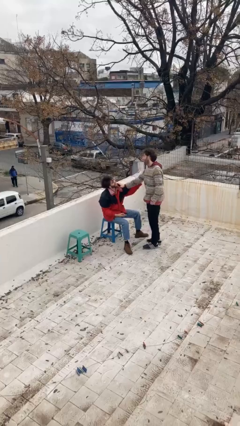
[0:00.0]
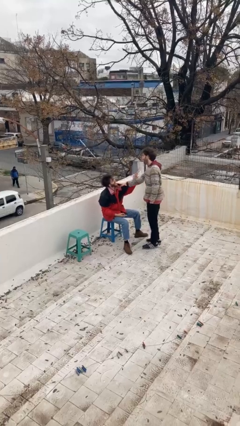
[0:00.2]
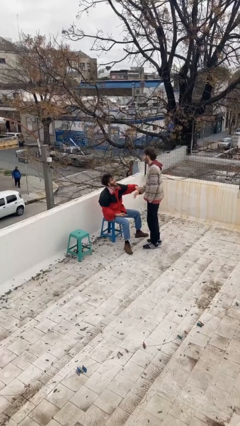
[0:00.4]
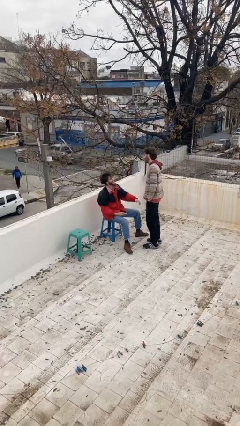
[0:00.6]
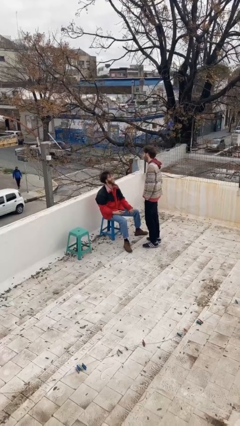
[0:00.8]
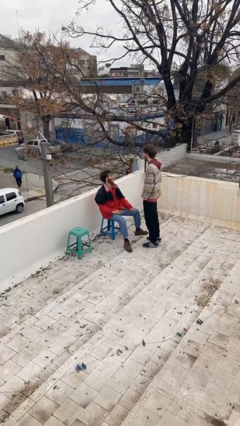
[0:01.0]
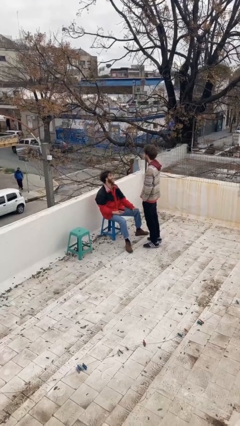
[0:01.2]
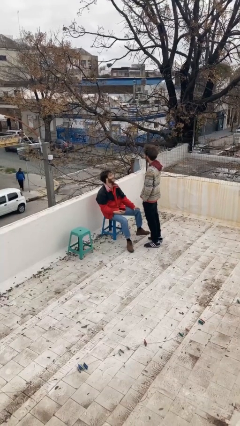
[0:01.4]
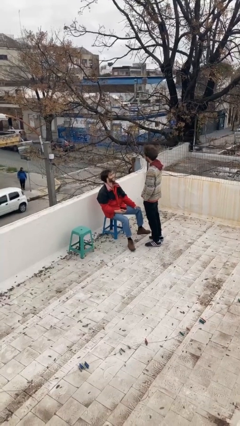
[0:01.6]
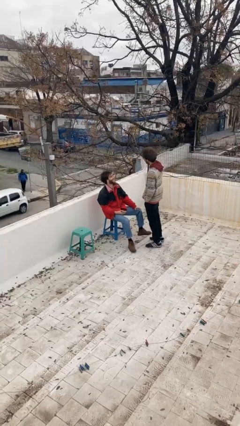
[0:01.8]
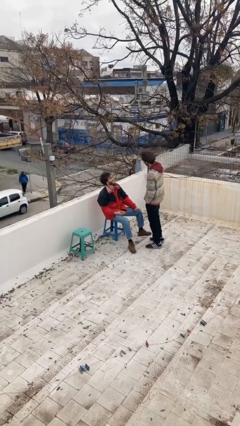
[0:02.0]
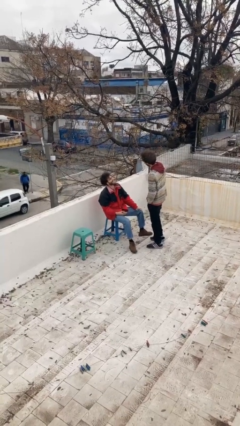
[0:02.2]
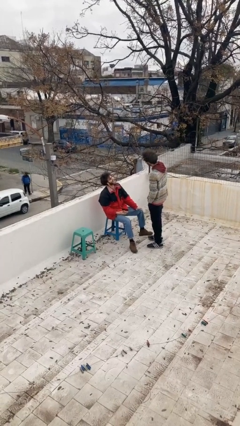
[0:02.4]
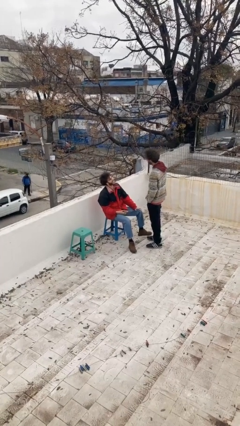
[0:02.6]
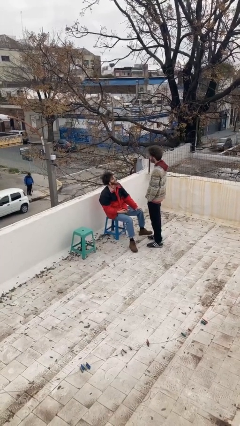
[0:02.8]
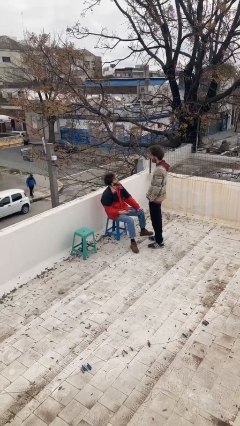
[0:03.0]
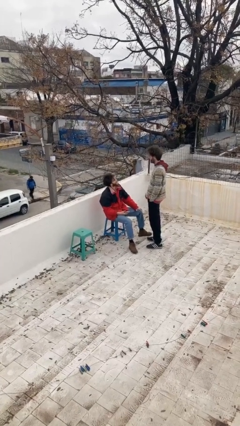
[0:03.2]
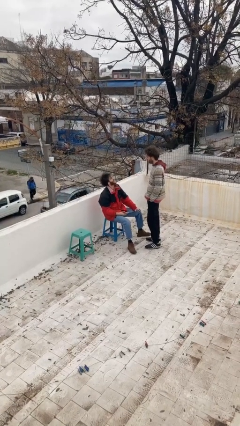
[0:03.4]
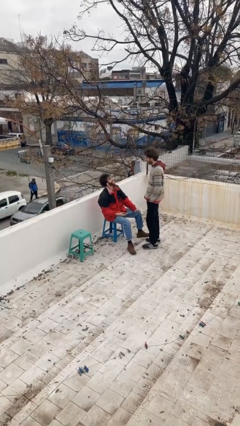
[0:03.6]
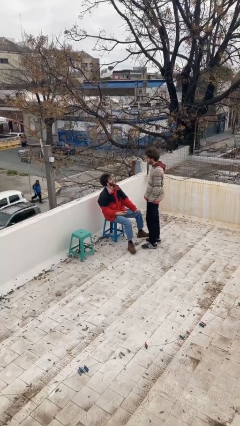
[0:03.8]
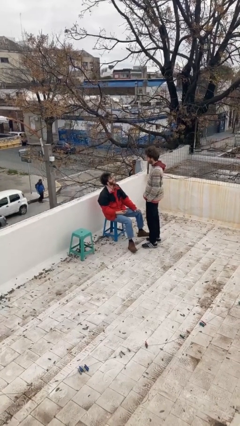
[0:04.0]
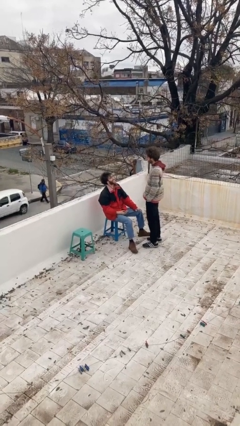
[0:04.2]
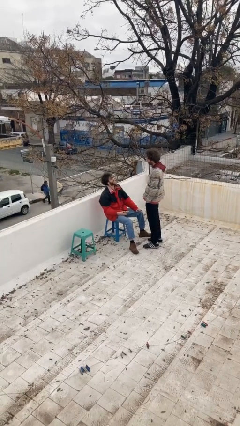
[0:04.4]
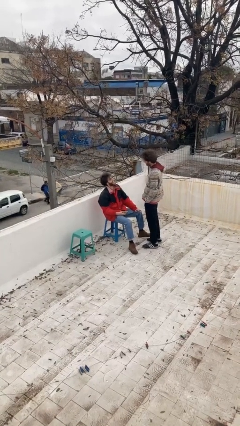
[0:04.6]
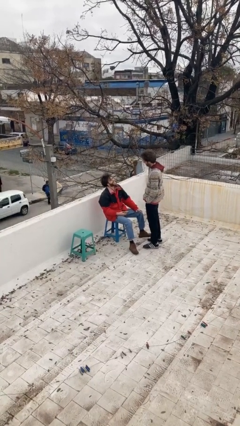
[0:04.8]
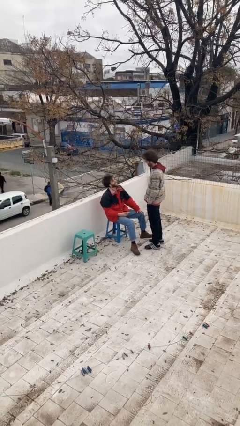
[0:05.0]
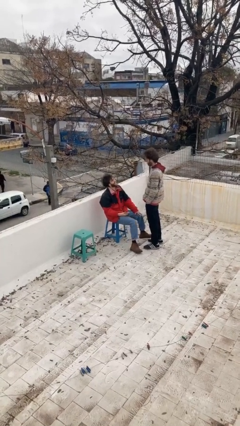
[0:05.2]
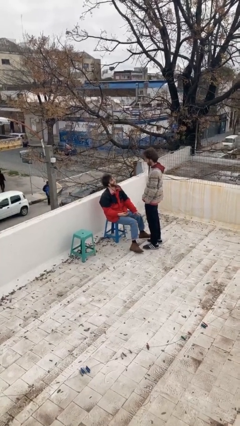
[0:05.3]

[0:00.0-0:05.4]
person talks to person

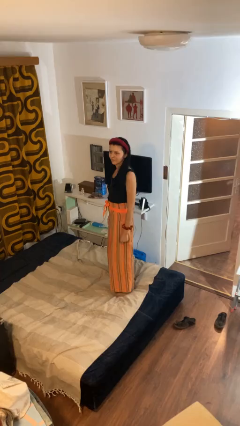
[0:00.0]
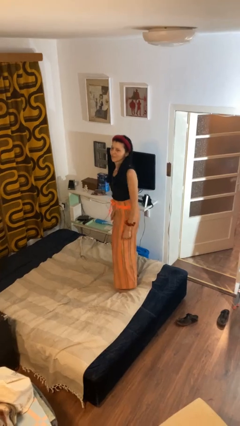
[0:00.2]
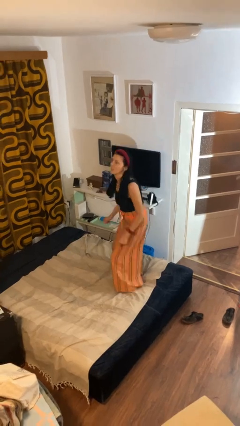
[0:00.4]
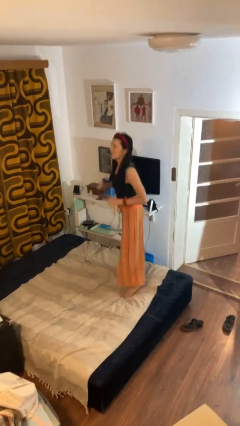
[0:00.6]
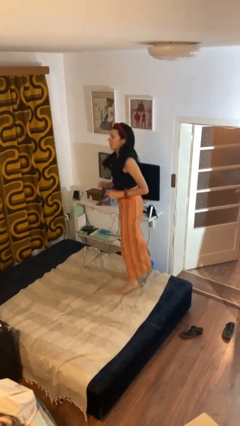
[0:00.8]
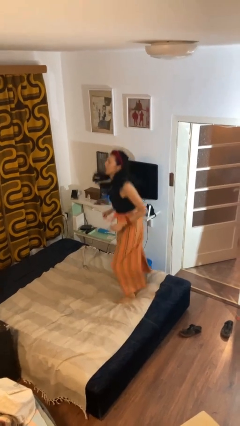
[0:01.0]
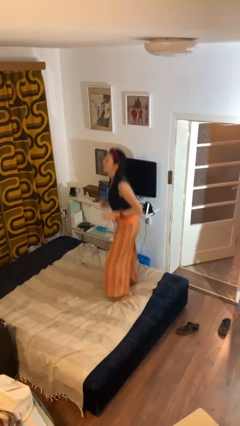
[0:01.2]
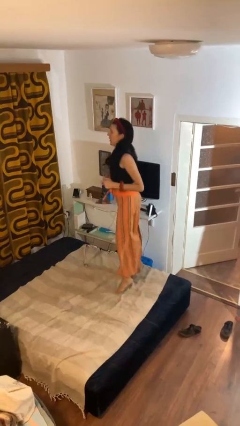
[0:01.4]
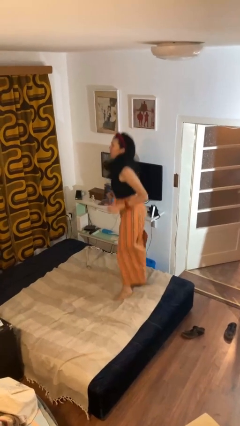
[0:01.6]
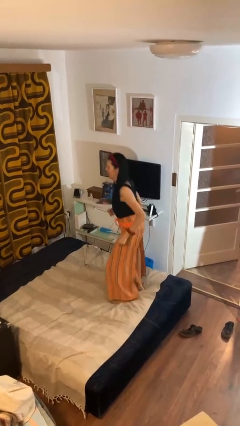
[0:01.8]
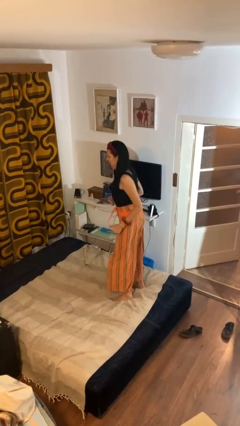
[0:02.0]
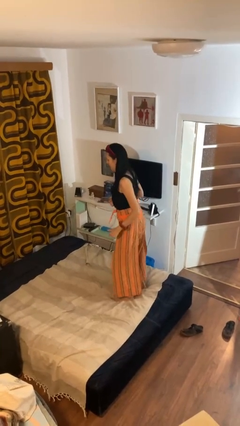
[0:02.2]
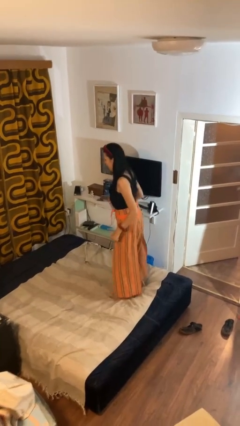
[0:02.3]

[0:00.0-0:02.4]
person jumps on bed

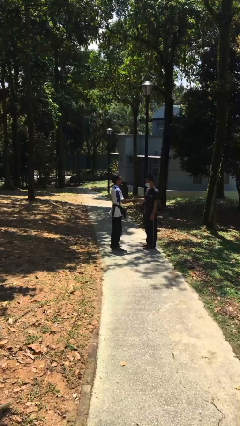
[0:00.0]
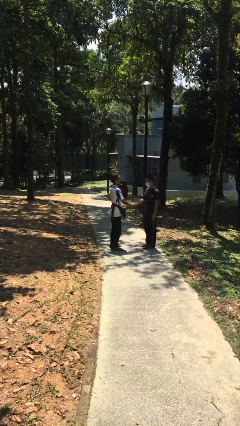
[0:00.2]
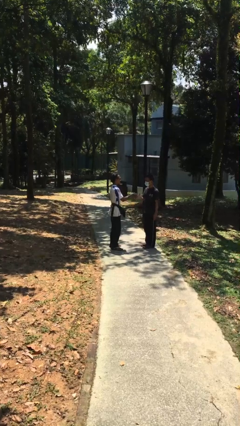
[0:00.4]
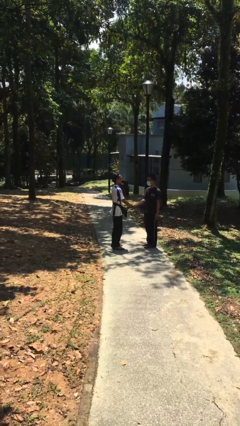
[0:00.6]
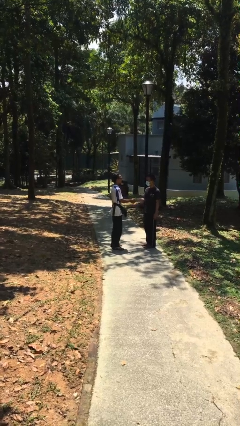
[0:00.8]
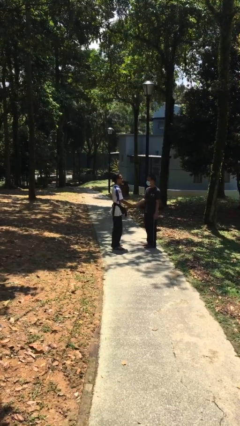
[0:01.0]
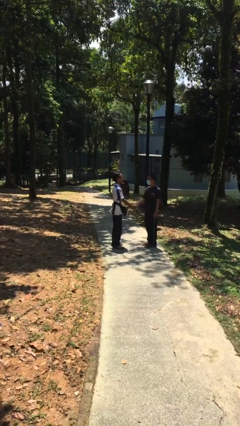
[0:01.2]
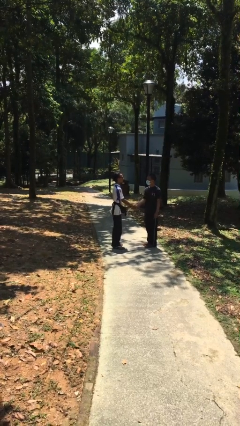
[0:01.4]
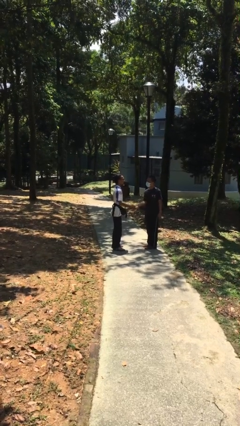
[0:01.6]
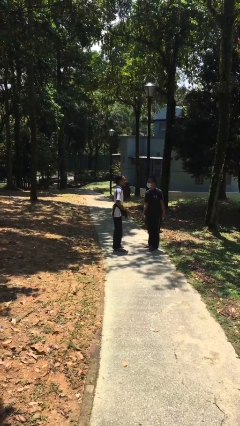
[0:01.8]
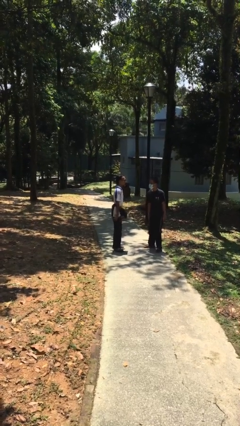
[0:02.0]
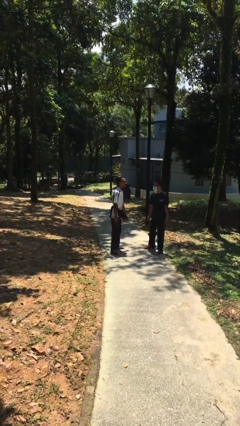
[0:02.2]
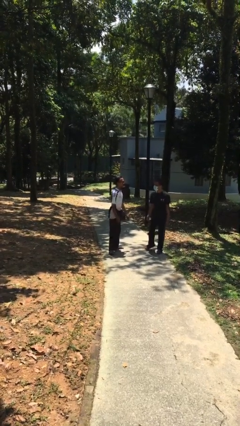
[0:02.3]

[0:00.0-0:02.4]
person shakes hand

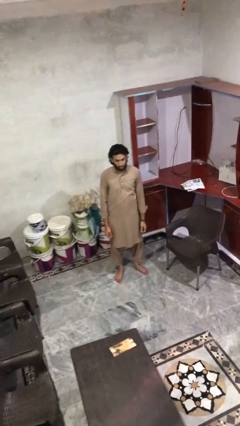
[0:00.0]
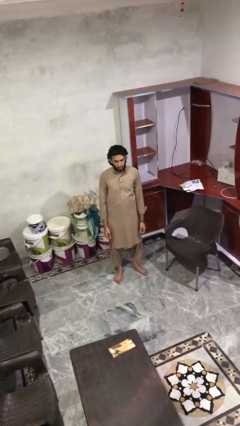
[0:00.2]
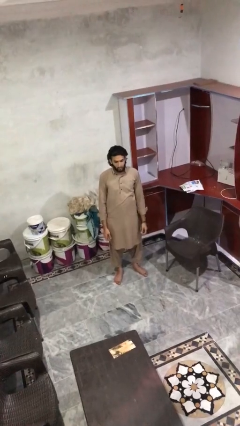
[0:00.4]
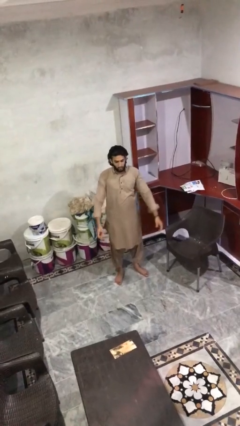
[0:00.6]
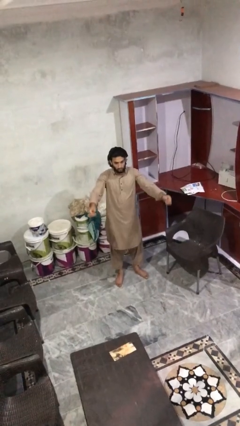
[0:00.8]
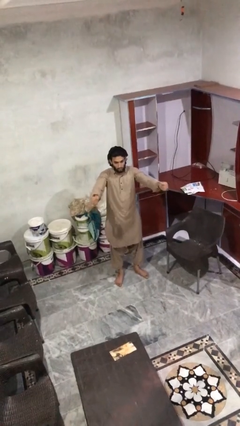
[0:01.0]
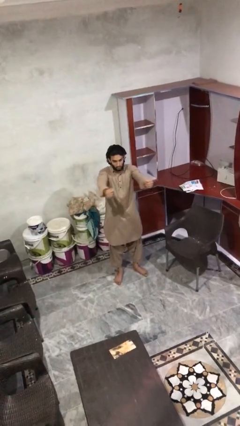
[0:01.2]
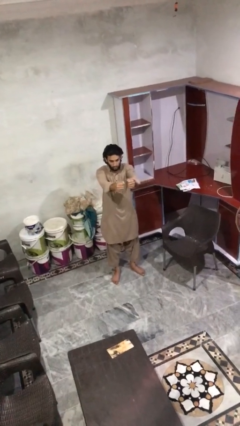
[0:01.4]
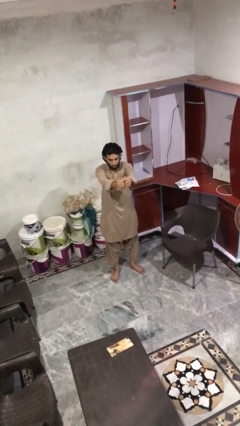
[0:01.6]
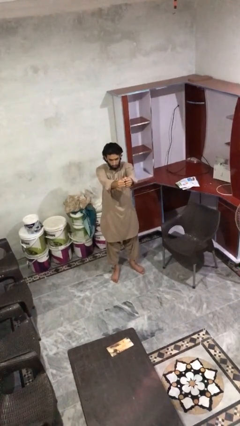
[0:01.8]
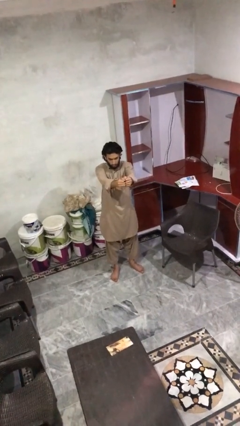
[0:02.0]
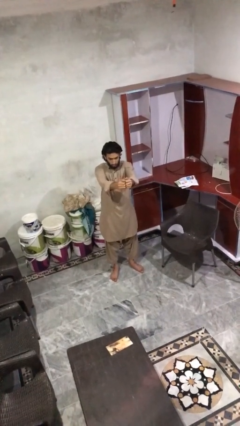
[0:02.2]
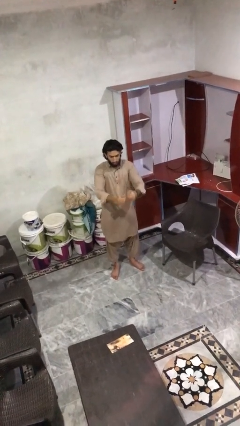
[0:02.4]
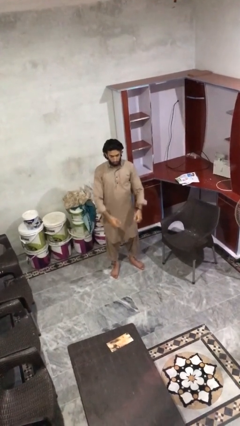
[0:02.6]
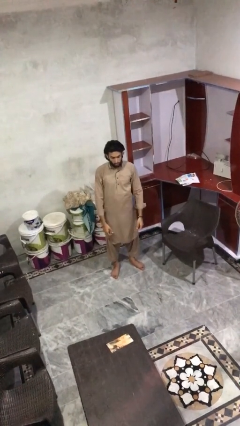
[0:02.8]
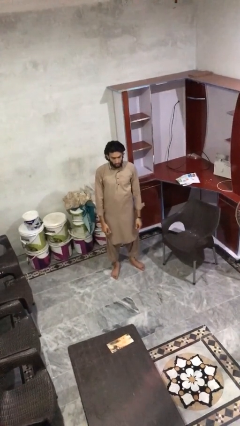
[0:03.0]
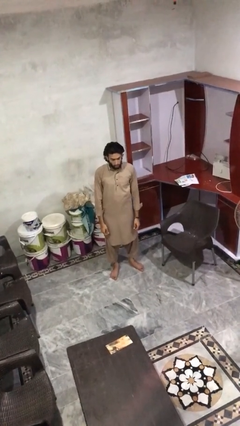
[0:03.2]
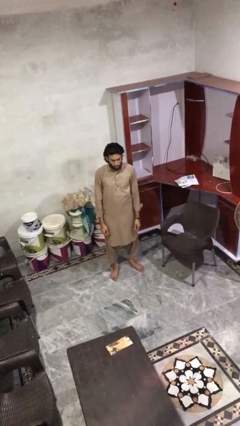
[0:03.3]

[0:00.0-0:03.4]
person gestures zoom out

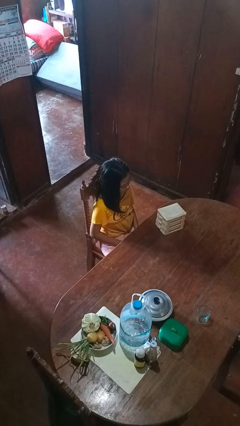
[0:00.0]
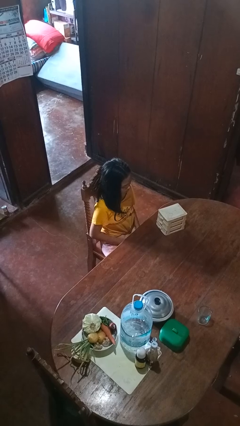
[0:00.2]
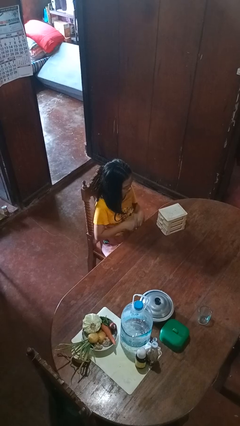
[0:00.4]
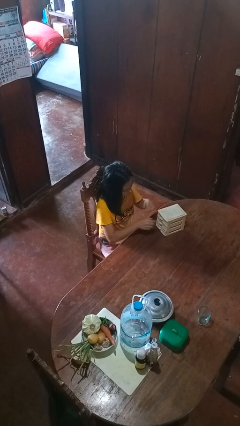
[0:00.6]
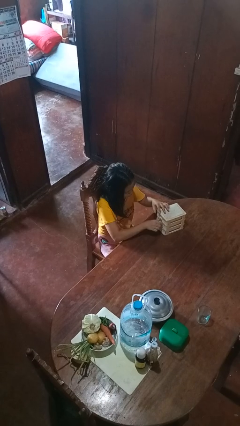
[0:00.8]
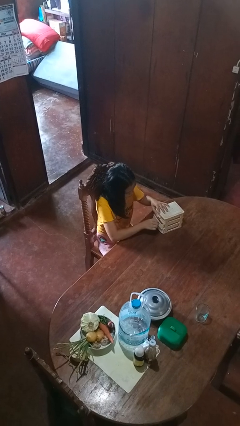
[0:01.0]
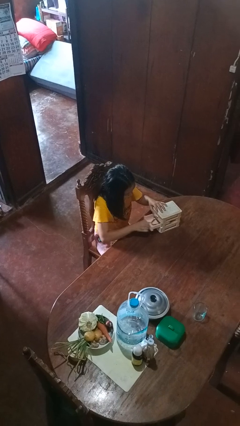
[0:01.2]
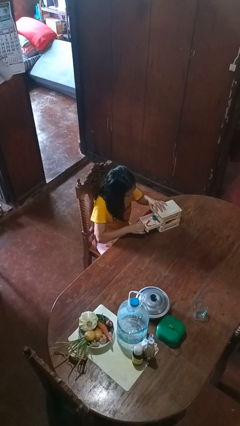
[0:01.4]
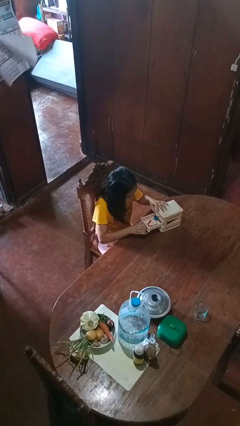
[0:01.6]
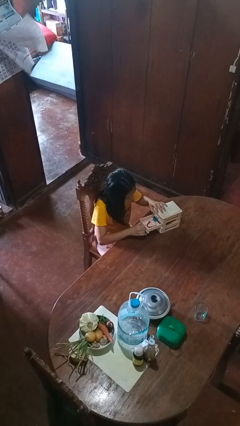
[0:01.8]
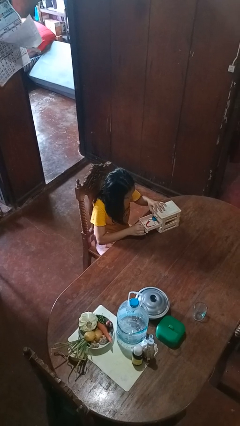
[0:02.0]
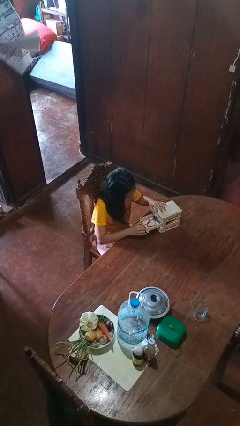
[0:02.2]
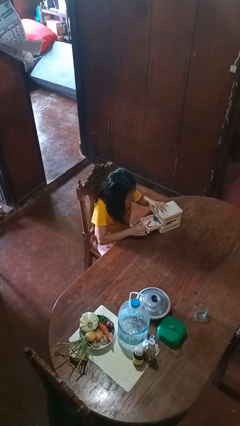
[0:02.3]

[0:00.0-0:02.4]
person opens jewelry box

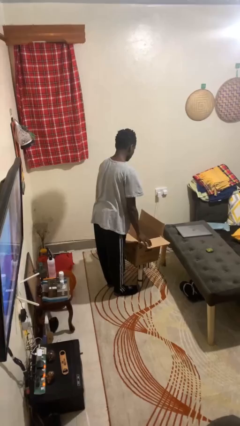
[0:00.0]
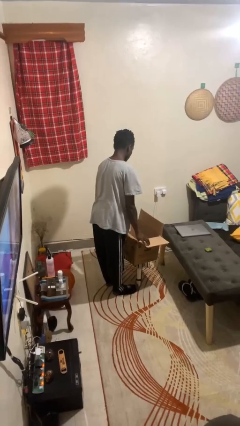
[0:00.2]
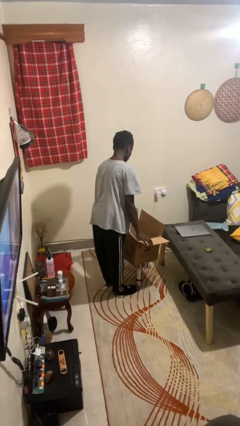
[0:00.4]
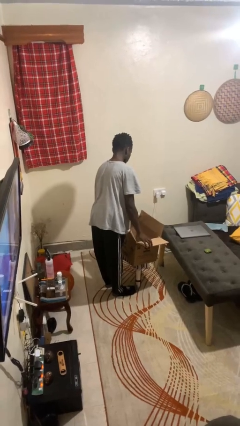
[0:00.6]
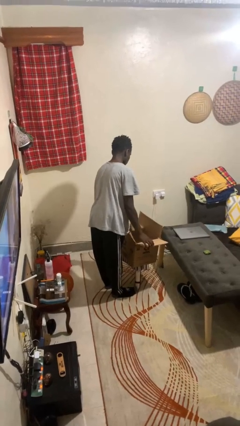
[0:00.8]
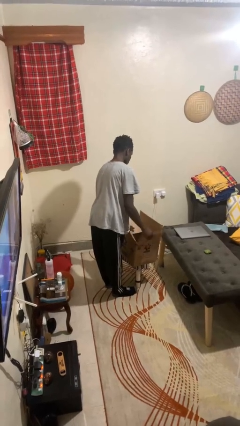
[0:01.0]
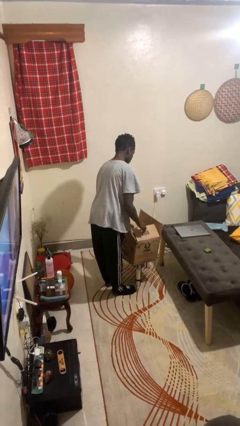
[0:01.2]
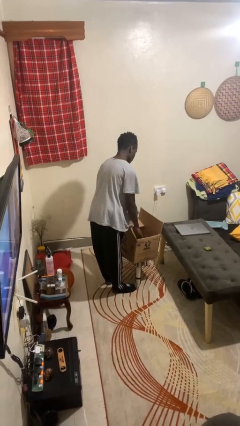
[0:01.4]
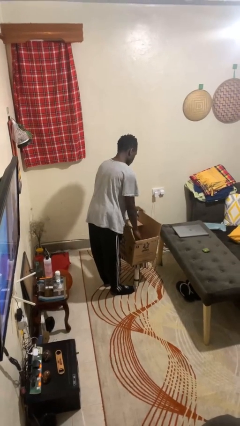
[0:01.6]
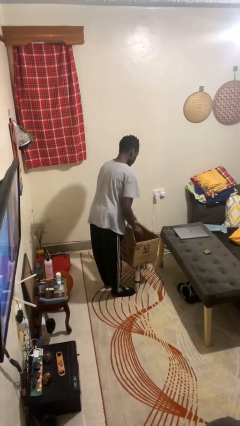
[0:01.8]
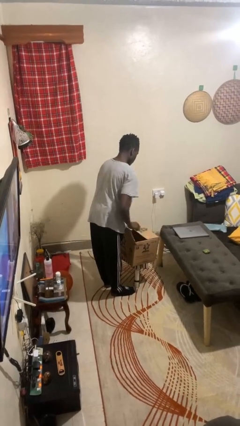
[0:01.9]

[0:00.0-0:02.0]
person closes box
